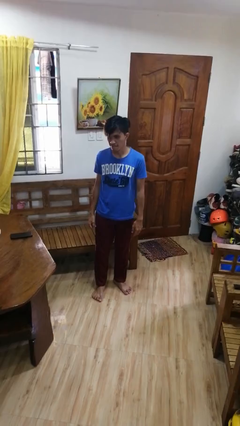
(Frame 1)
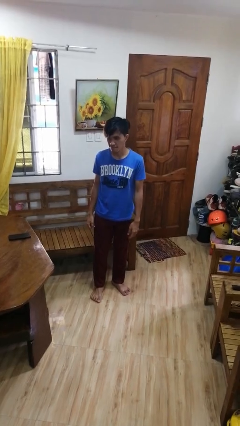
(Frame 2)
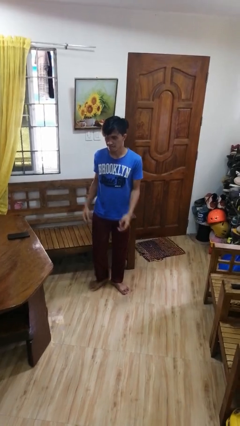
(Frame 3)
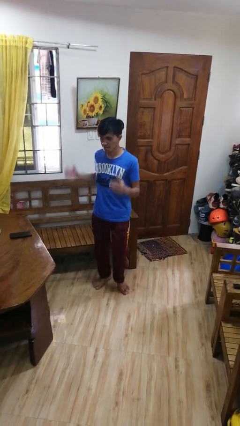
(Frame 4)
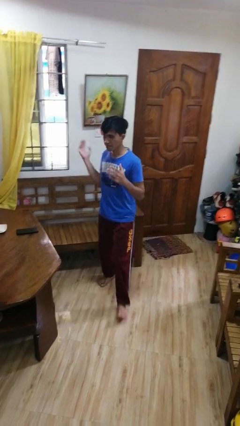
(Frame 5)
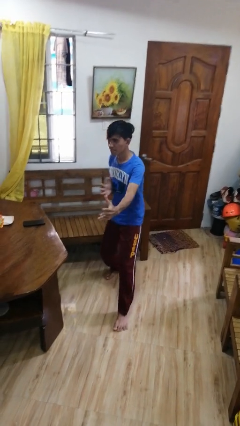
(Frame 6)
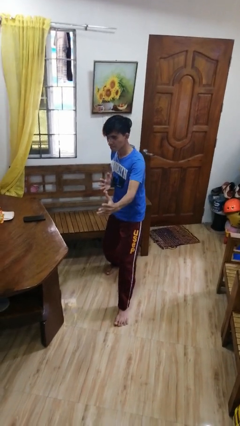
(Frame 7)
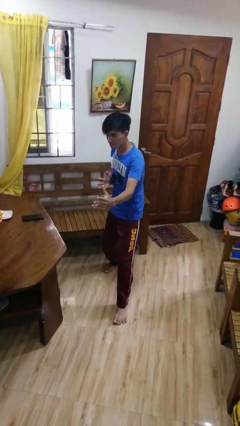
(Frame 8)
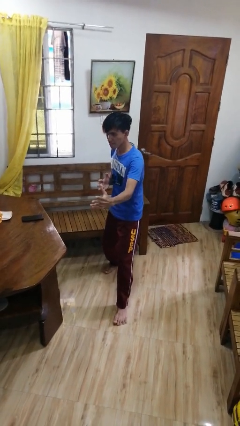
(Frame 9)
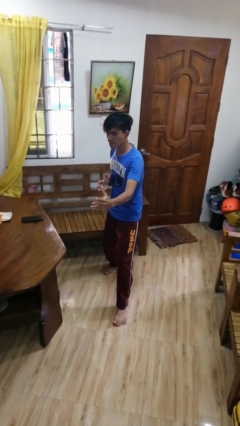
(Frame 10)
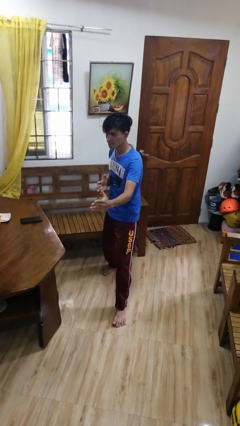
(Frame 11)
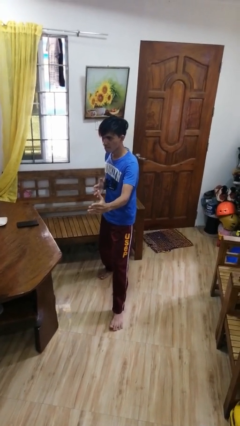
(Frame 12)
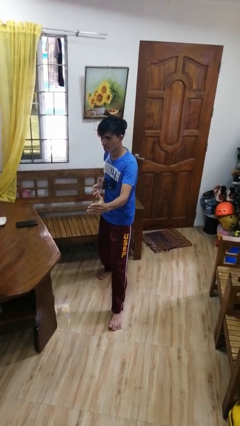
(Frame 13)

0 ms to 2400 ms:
person karate chop

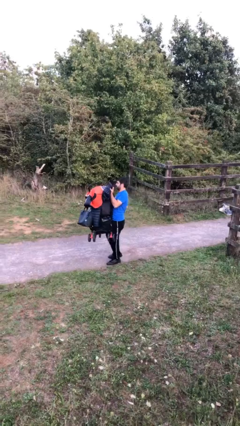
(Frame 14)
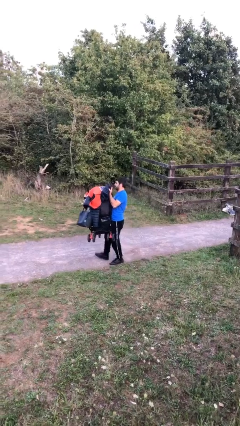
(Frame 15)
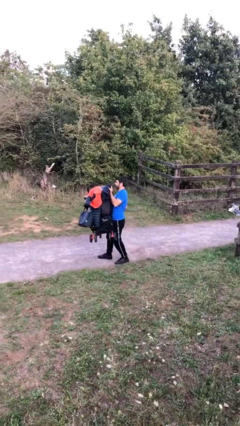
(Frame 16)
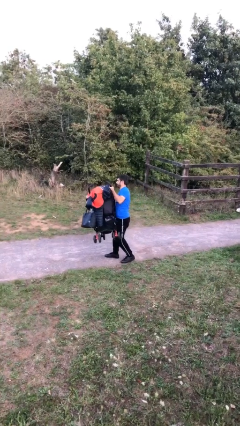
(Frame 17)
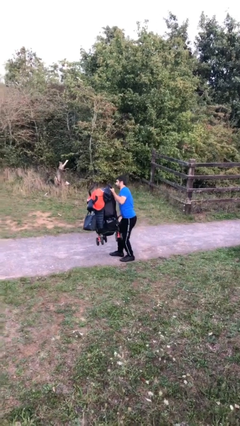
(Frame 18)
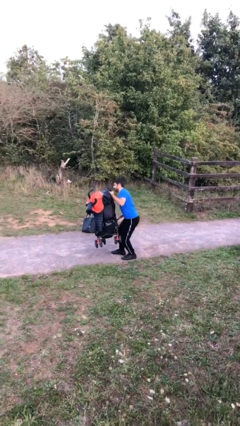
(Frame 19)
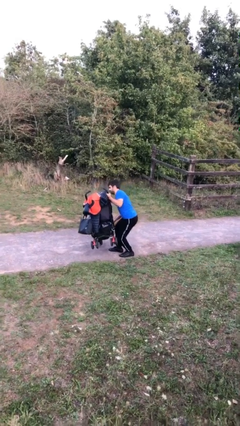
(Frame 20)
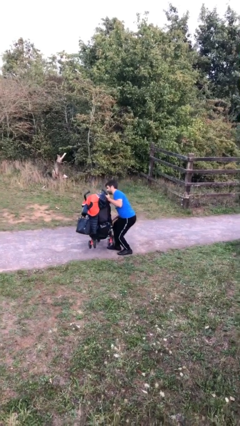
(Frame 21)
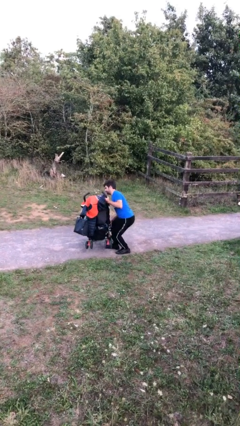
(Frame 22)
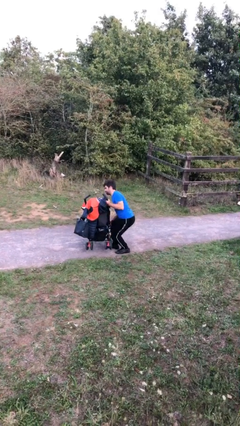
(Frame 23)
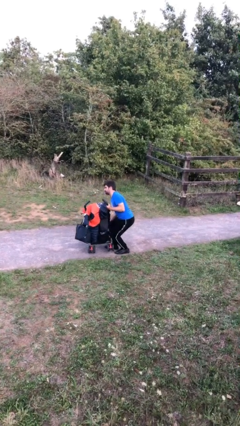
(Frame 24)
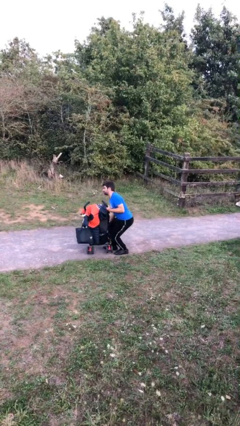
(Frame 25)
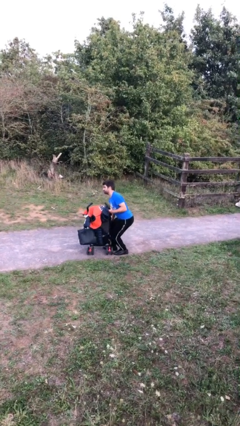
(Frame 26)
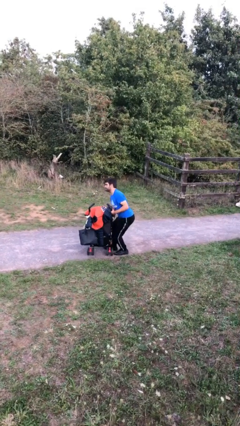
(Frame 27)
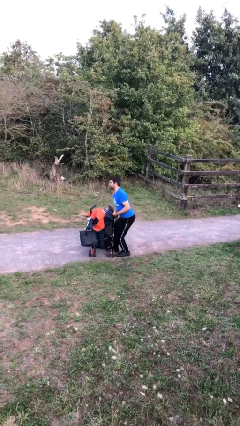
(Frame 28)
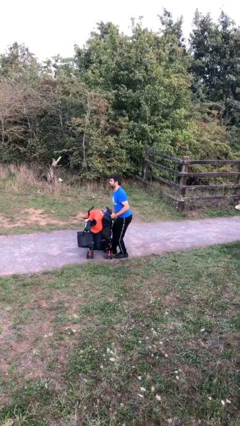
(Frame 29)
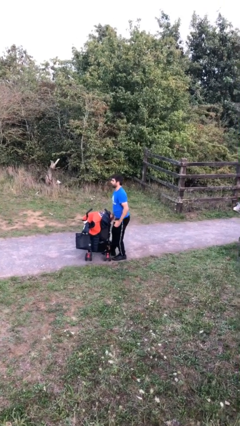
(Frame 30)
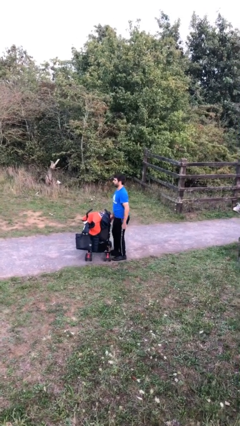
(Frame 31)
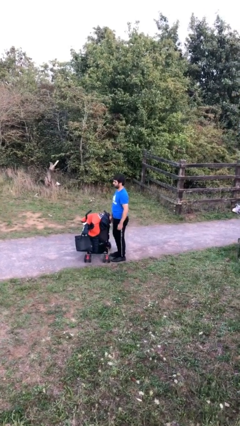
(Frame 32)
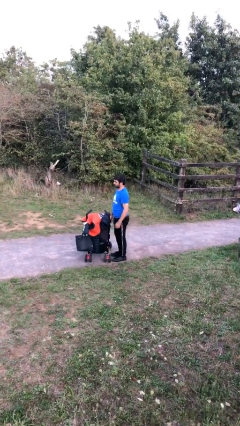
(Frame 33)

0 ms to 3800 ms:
person puts down object on floor

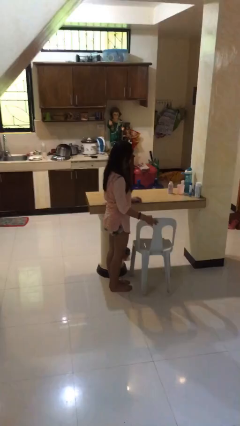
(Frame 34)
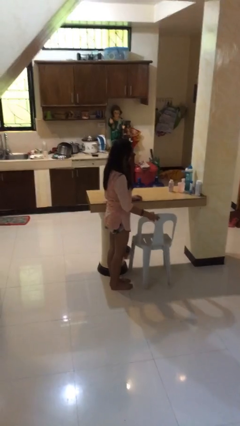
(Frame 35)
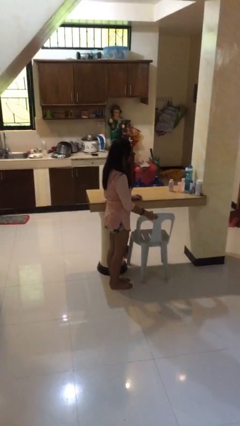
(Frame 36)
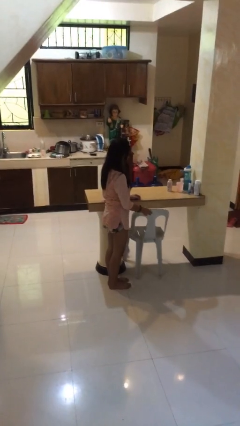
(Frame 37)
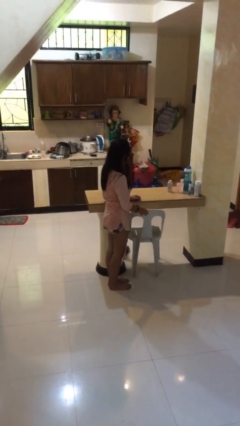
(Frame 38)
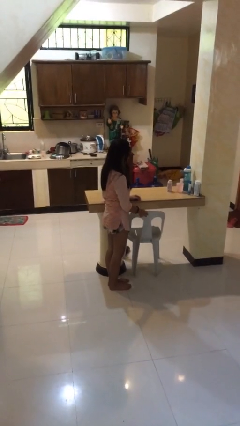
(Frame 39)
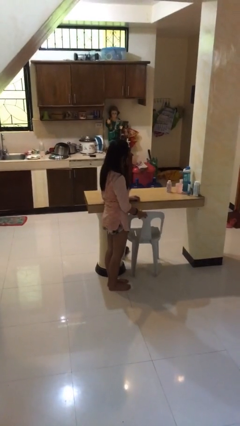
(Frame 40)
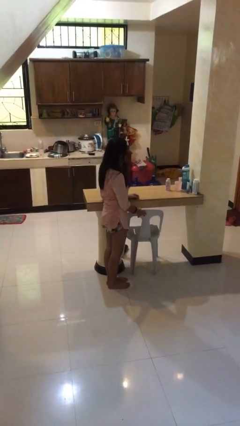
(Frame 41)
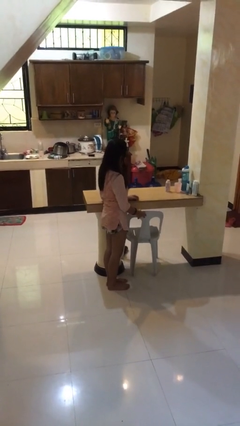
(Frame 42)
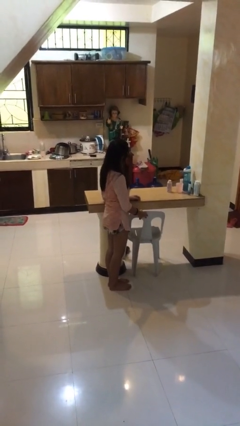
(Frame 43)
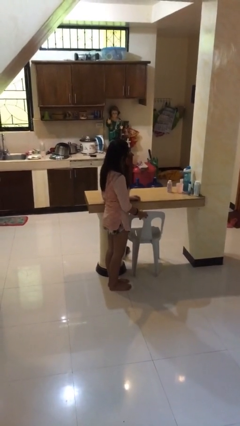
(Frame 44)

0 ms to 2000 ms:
person pushes in chair

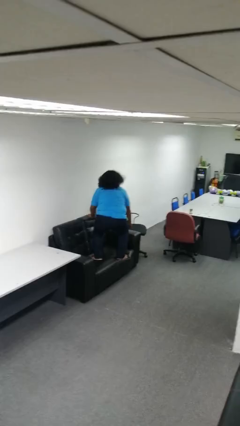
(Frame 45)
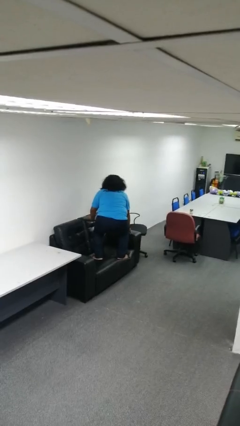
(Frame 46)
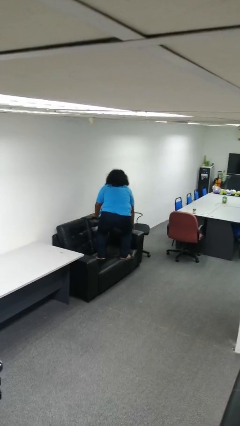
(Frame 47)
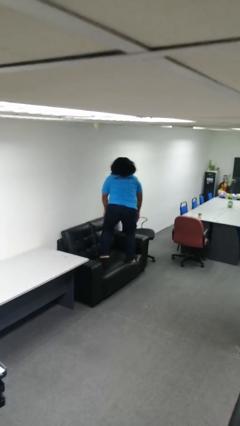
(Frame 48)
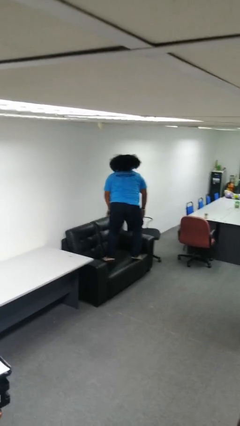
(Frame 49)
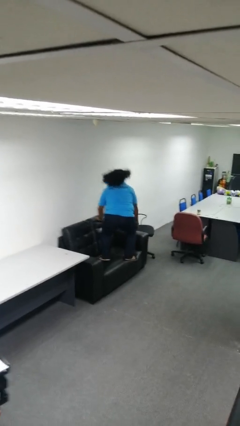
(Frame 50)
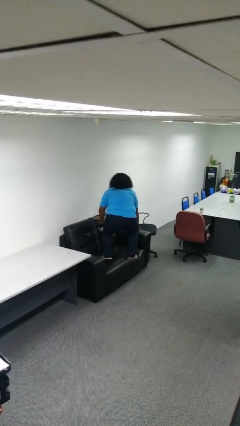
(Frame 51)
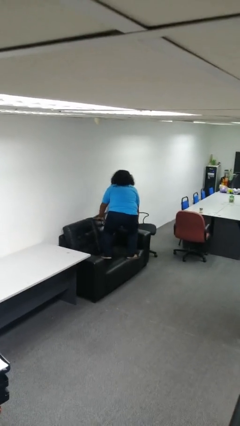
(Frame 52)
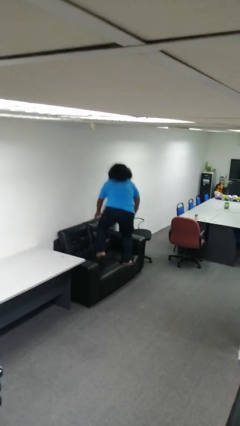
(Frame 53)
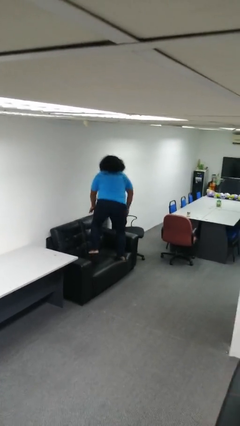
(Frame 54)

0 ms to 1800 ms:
person jumps on couch

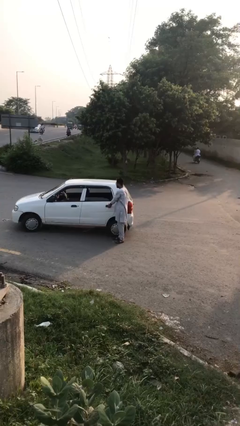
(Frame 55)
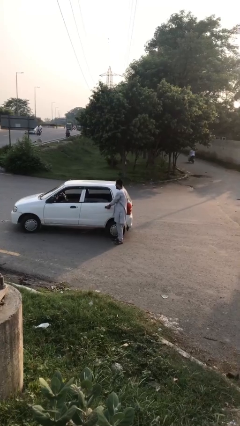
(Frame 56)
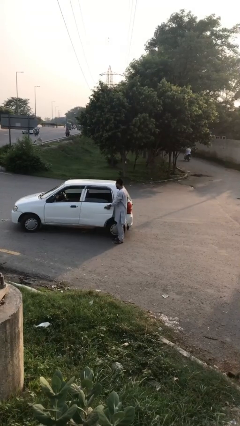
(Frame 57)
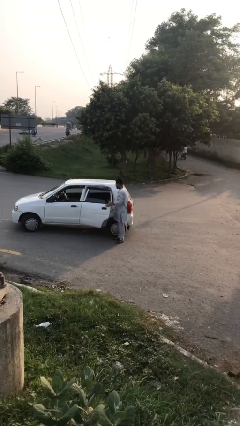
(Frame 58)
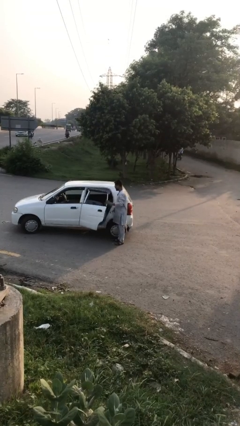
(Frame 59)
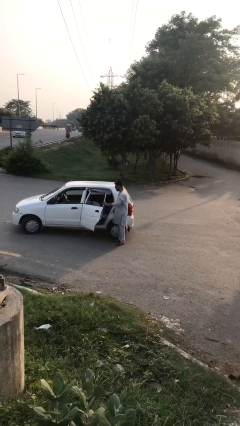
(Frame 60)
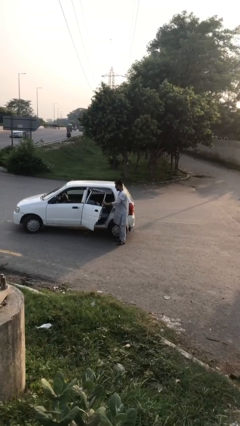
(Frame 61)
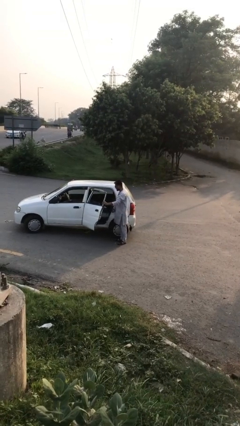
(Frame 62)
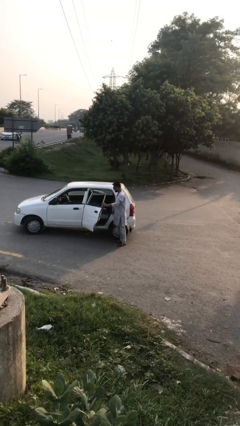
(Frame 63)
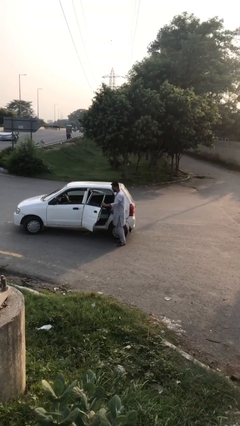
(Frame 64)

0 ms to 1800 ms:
person opens car door

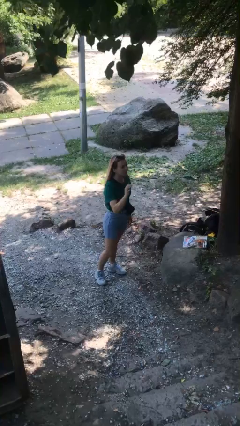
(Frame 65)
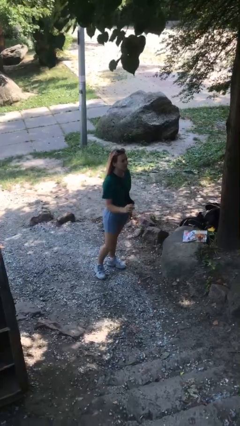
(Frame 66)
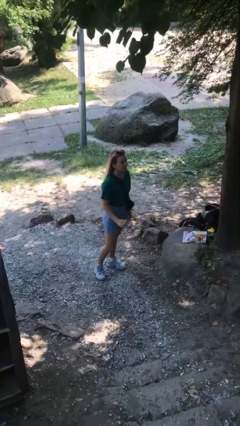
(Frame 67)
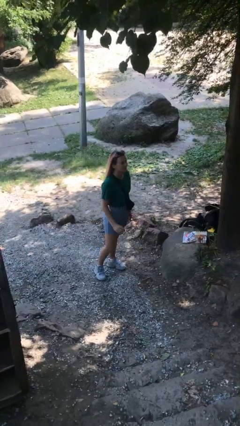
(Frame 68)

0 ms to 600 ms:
person gestures lower hand

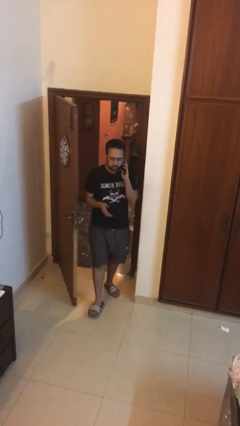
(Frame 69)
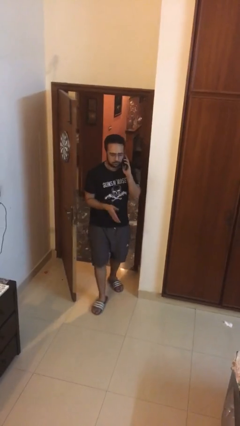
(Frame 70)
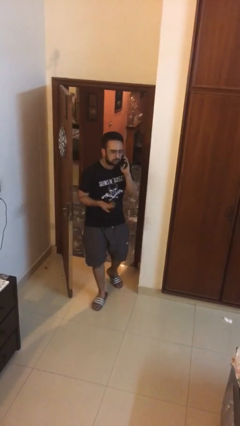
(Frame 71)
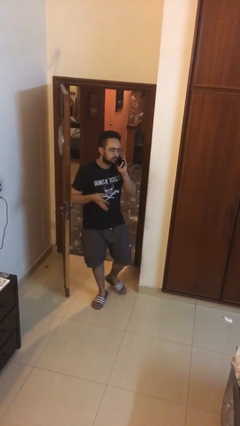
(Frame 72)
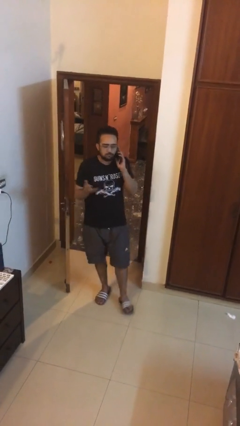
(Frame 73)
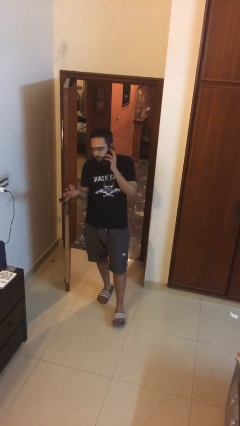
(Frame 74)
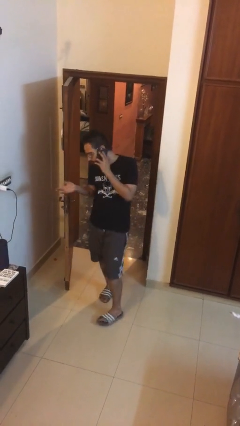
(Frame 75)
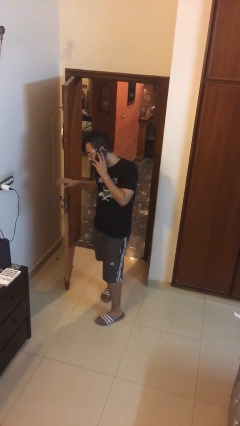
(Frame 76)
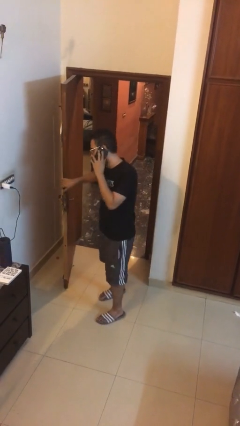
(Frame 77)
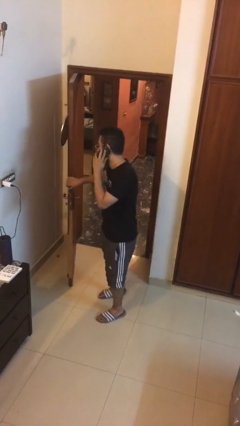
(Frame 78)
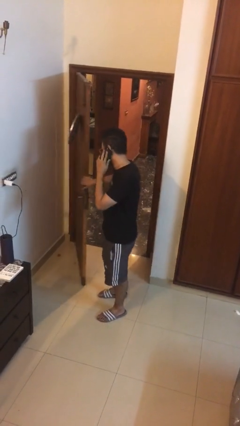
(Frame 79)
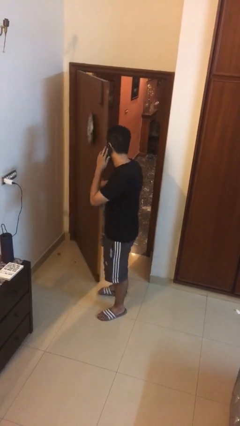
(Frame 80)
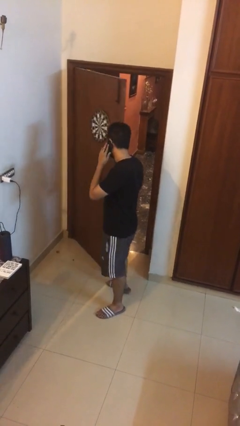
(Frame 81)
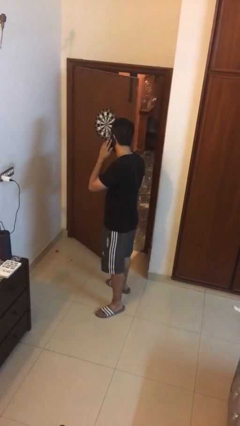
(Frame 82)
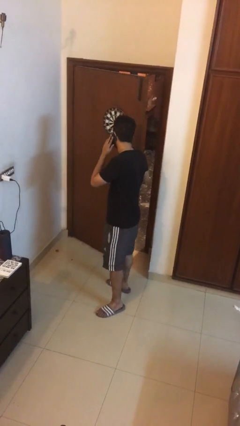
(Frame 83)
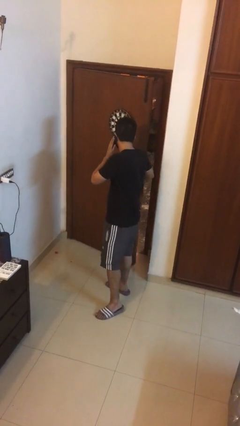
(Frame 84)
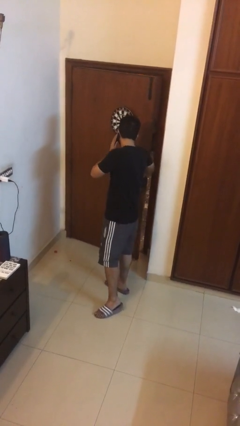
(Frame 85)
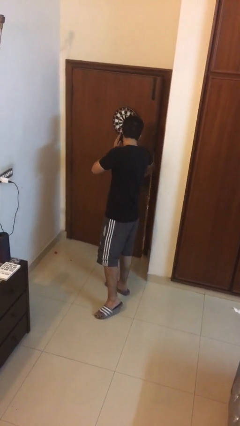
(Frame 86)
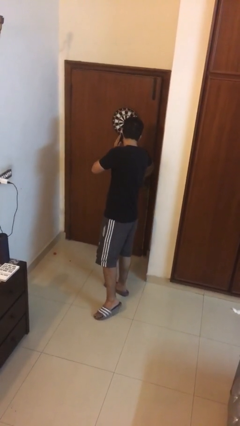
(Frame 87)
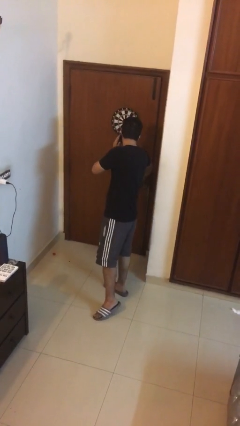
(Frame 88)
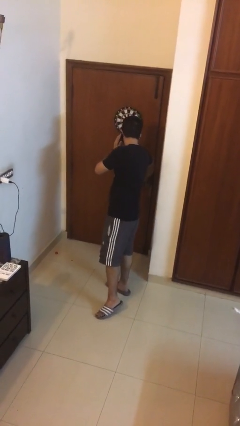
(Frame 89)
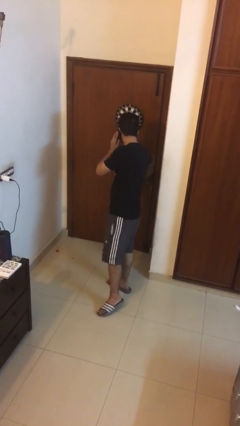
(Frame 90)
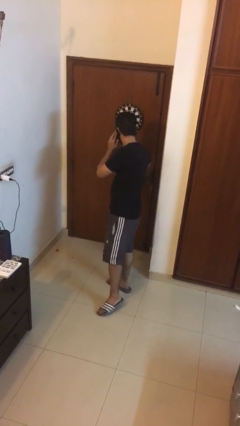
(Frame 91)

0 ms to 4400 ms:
person closes facility door

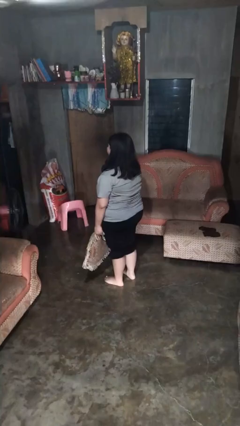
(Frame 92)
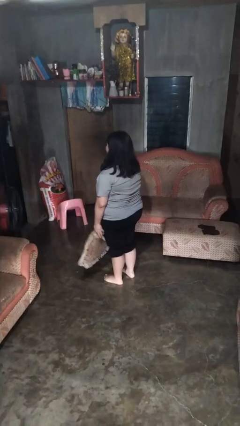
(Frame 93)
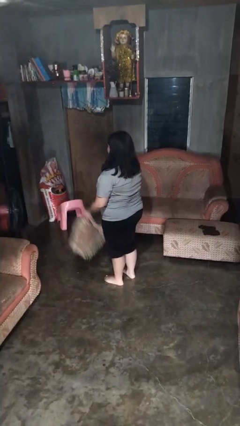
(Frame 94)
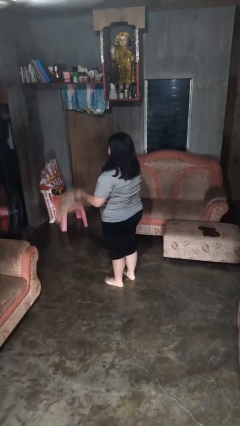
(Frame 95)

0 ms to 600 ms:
person throws object into air
